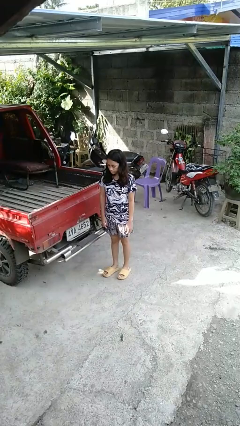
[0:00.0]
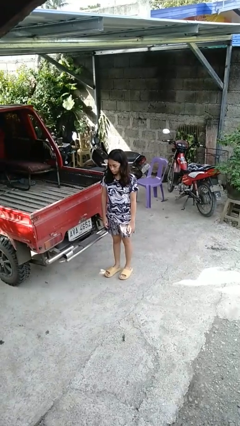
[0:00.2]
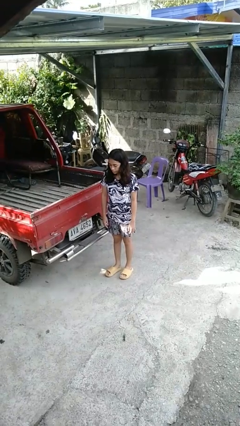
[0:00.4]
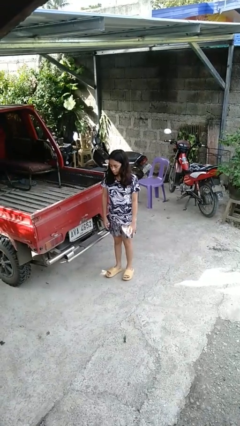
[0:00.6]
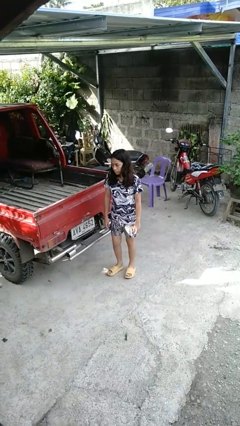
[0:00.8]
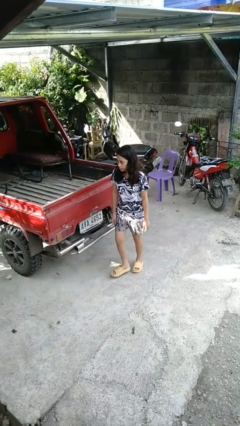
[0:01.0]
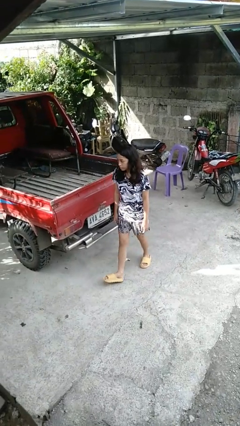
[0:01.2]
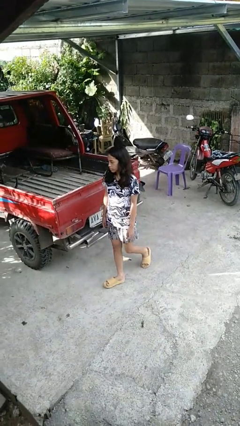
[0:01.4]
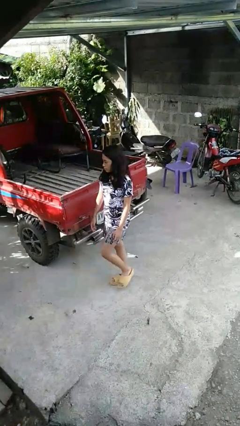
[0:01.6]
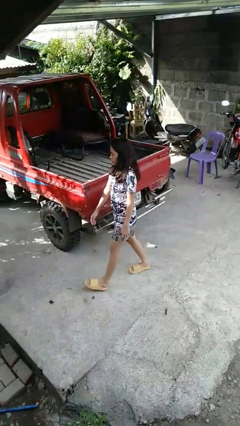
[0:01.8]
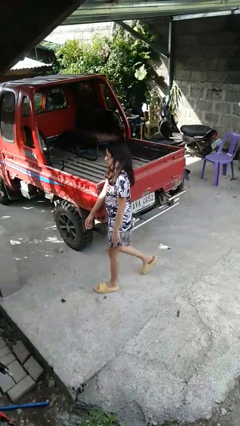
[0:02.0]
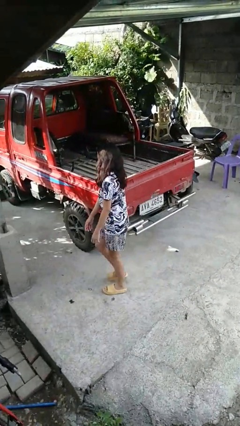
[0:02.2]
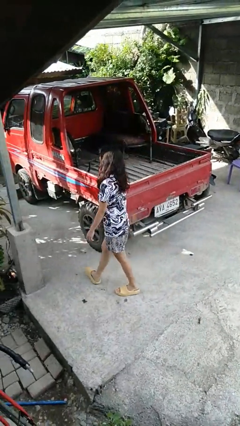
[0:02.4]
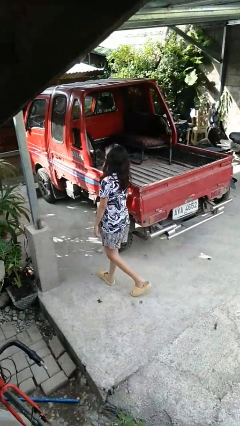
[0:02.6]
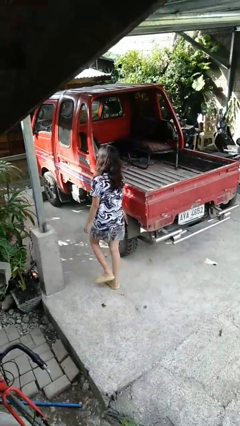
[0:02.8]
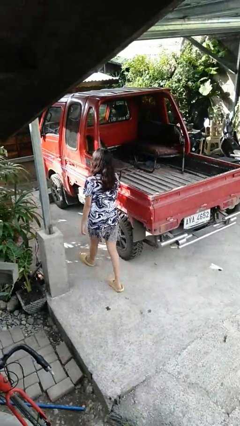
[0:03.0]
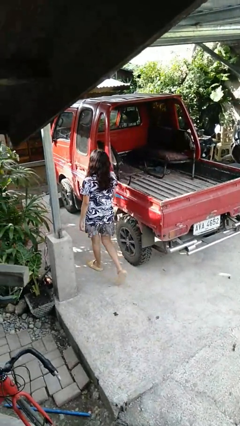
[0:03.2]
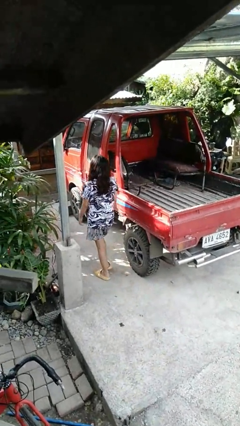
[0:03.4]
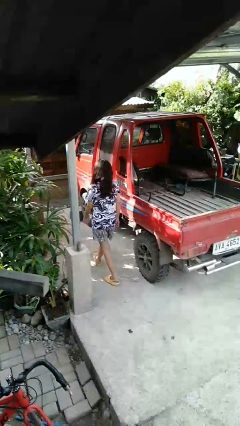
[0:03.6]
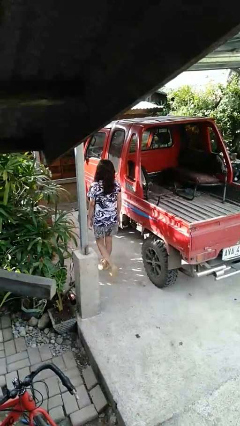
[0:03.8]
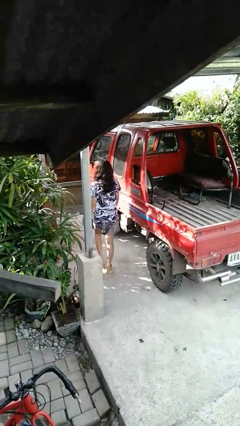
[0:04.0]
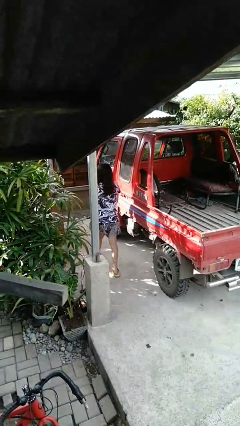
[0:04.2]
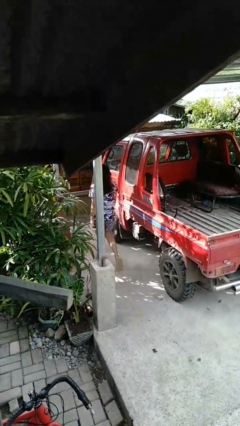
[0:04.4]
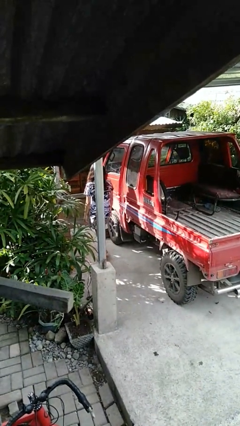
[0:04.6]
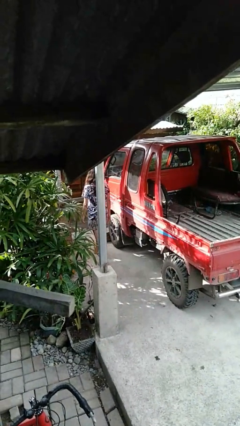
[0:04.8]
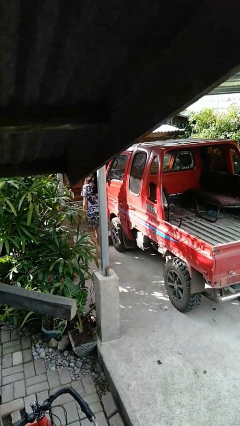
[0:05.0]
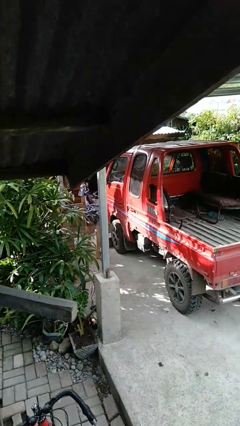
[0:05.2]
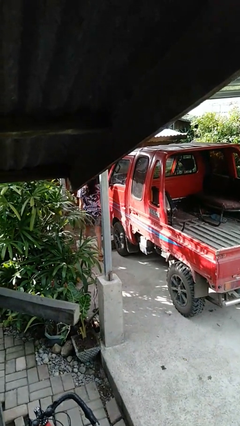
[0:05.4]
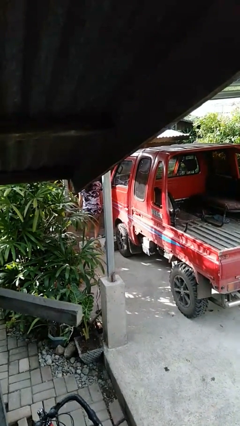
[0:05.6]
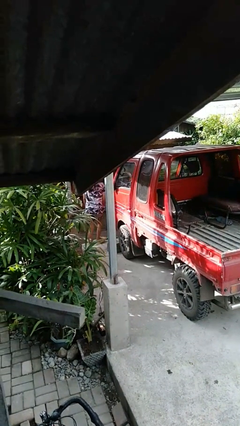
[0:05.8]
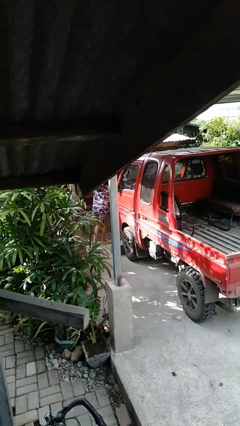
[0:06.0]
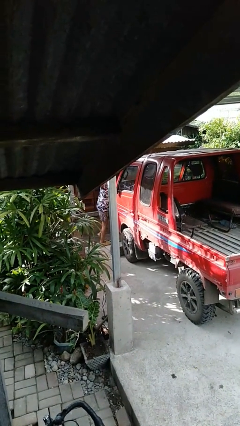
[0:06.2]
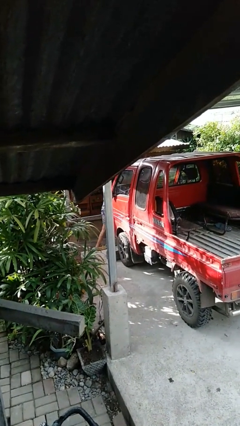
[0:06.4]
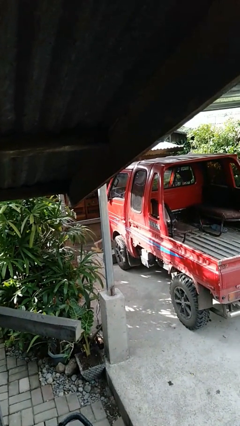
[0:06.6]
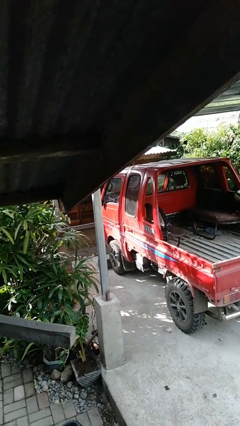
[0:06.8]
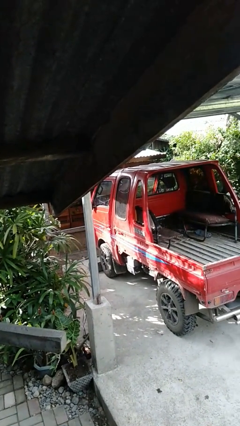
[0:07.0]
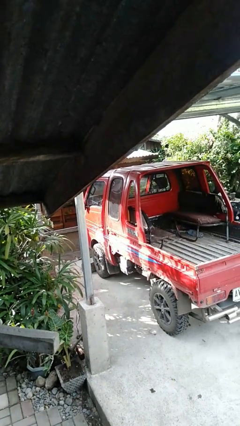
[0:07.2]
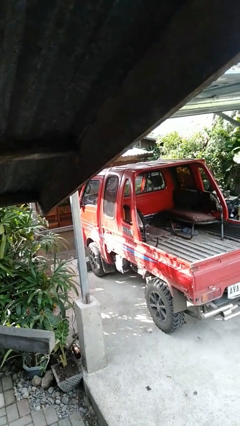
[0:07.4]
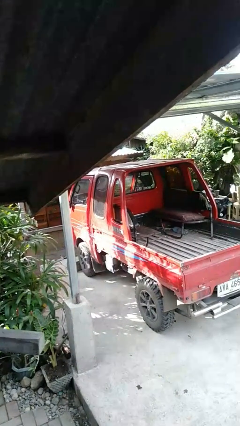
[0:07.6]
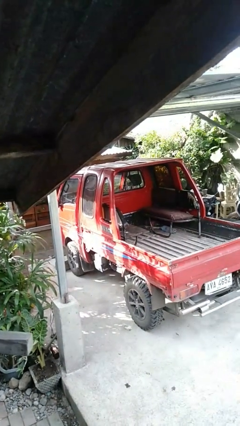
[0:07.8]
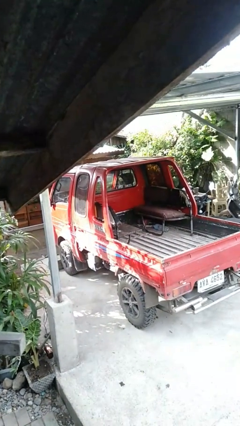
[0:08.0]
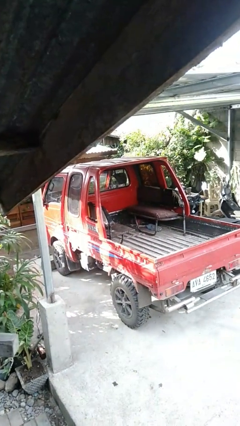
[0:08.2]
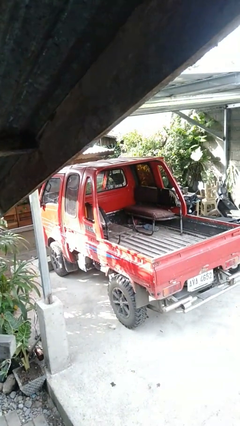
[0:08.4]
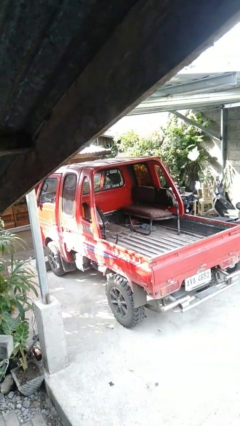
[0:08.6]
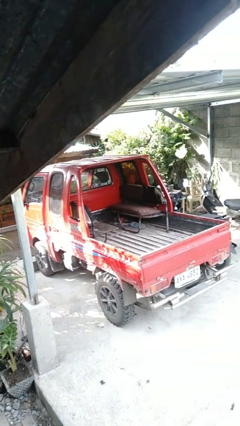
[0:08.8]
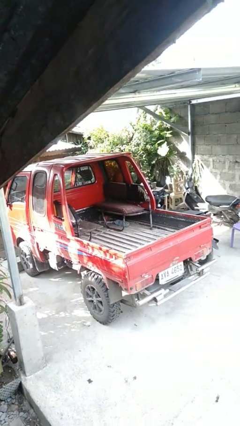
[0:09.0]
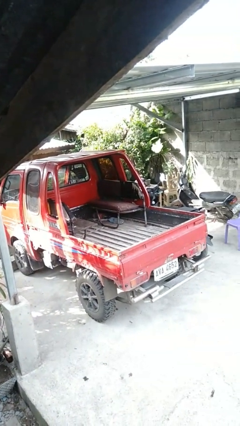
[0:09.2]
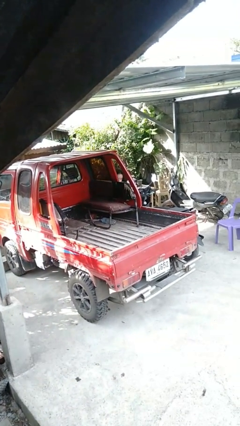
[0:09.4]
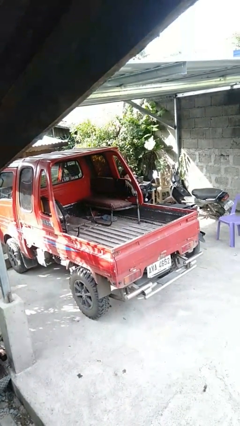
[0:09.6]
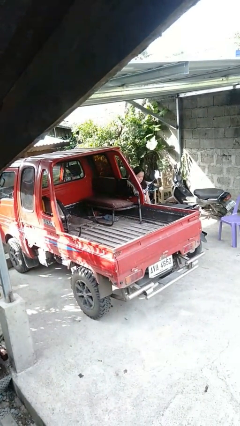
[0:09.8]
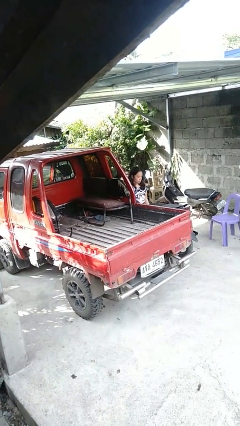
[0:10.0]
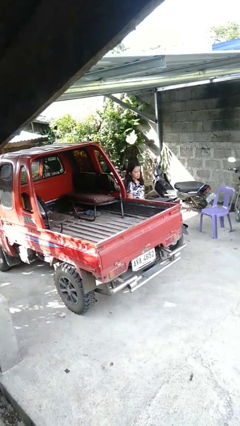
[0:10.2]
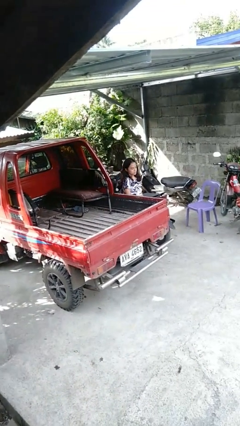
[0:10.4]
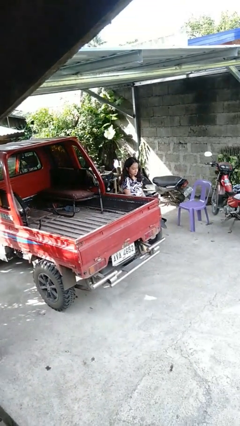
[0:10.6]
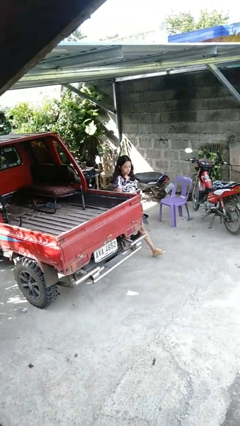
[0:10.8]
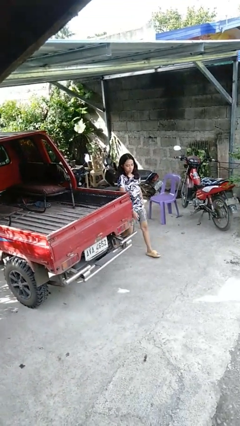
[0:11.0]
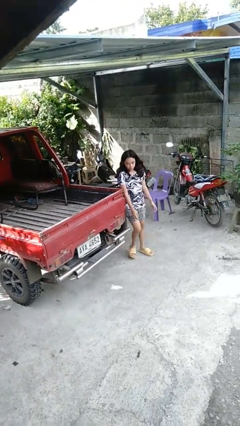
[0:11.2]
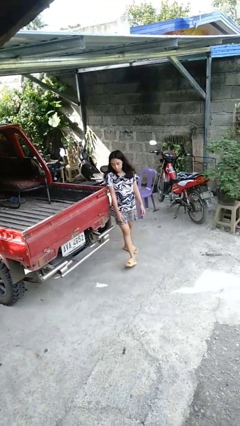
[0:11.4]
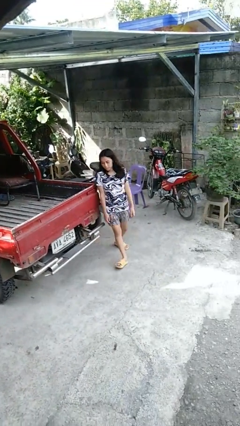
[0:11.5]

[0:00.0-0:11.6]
person walks around car

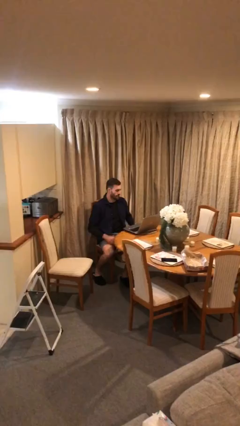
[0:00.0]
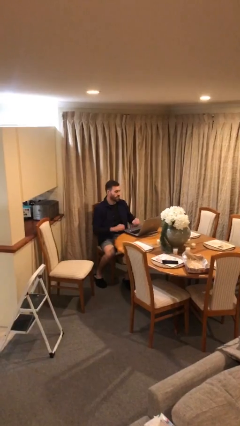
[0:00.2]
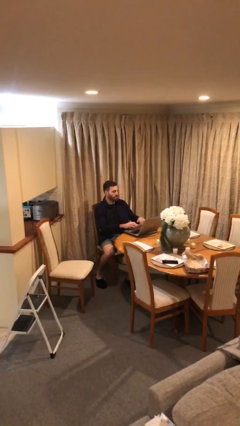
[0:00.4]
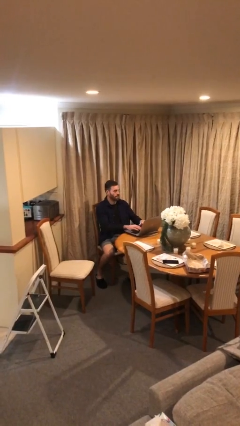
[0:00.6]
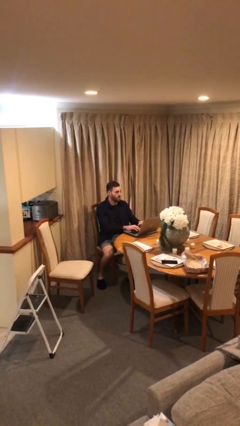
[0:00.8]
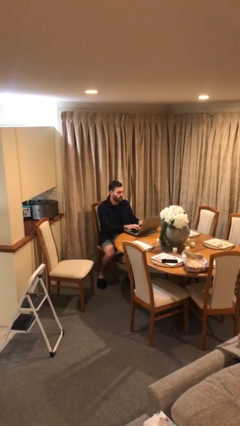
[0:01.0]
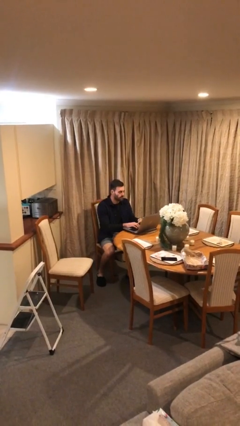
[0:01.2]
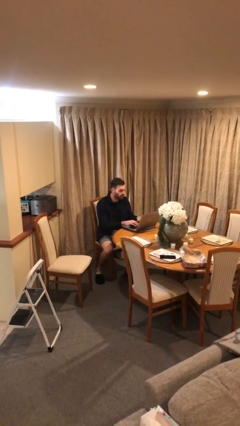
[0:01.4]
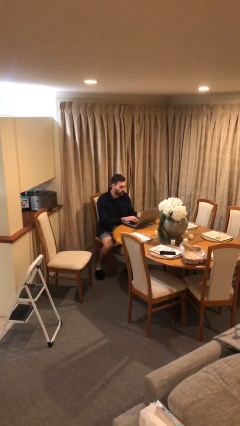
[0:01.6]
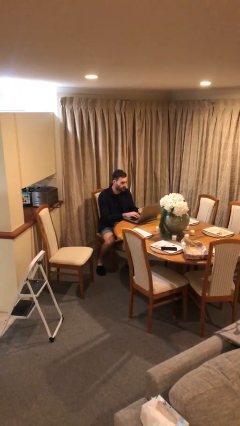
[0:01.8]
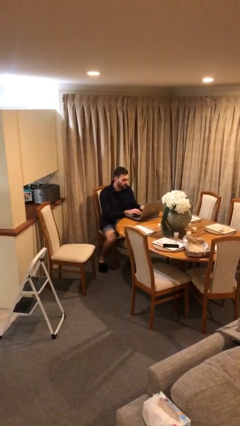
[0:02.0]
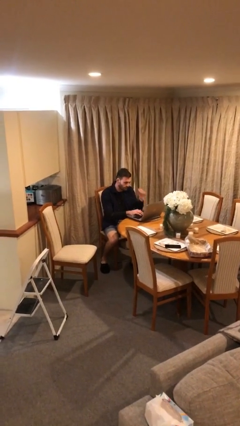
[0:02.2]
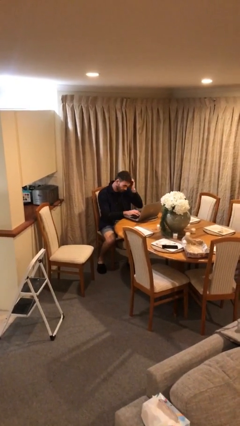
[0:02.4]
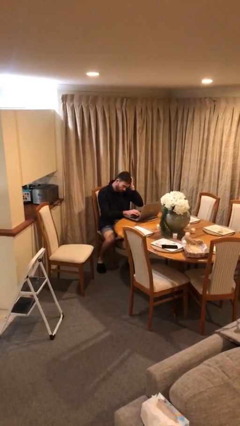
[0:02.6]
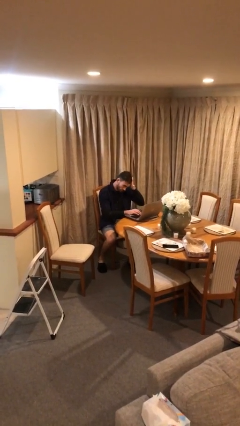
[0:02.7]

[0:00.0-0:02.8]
person interacts with laptop

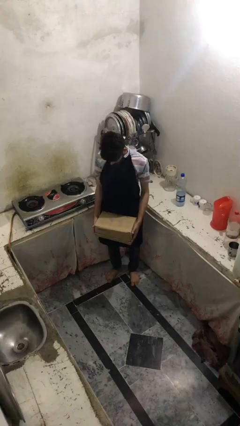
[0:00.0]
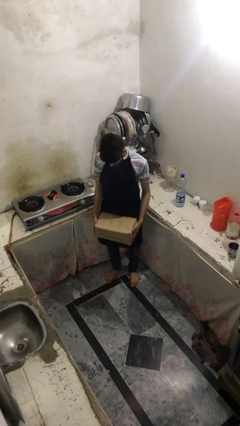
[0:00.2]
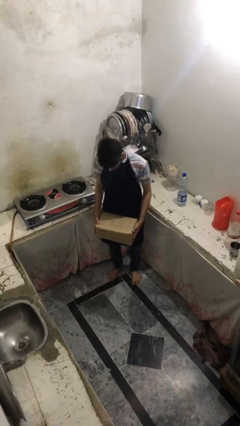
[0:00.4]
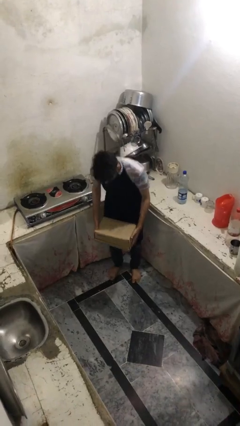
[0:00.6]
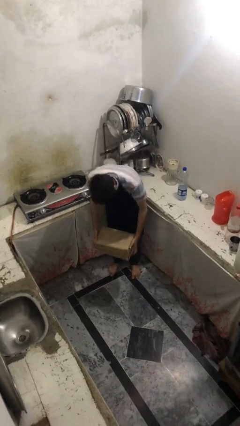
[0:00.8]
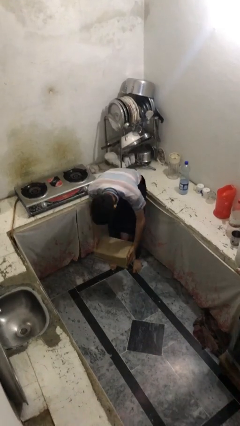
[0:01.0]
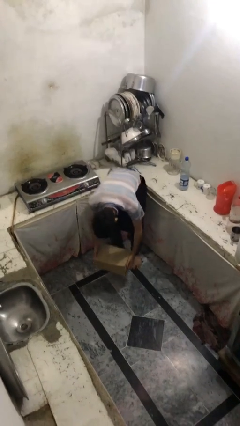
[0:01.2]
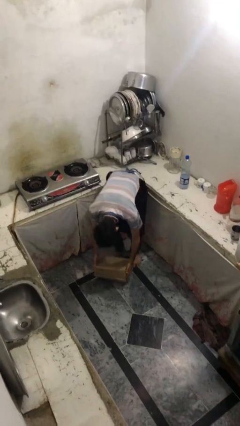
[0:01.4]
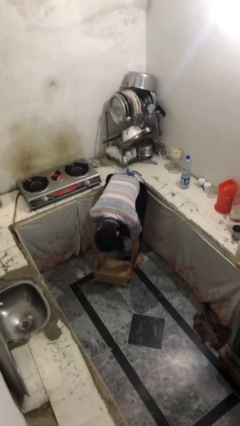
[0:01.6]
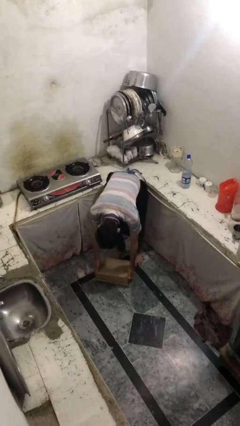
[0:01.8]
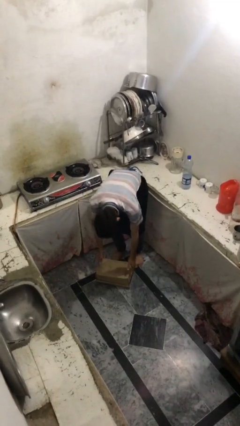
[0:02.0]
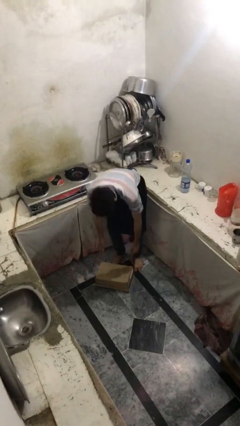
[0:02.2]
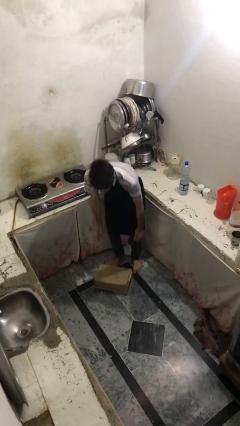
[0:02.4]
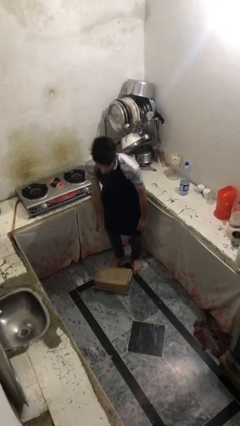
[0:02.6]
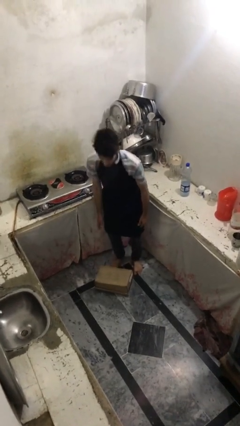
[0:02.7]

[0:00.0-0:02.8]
person puts down object on floor

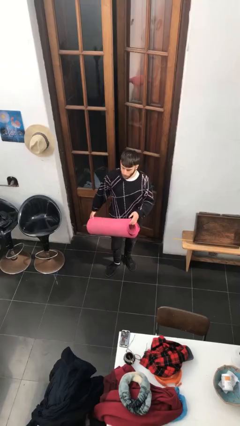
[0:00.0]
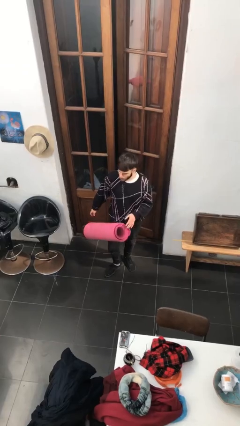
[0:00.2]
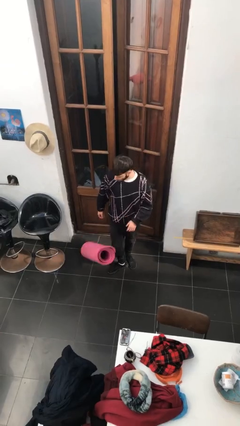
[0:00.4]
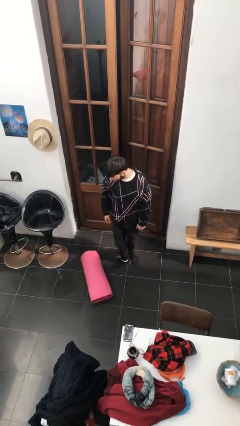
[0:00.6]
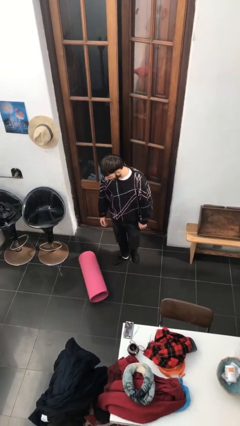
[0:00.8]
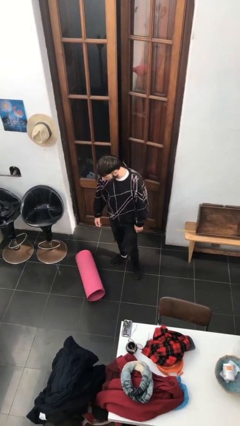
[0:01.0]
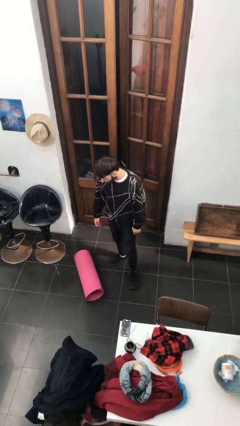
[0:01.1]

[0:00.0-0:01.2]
person drops object
